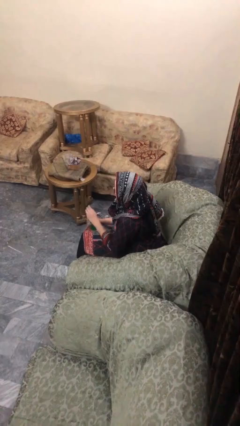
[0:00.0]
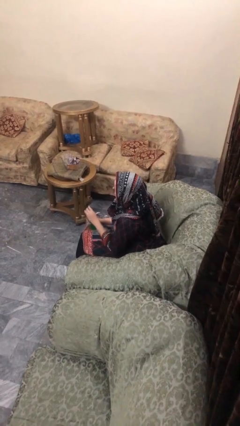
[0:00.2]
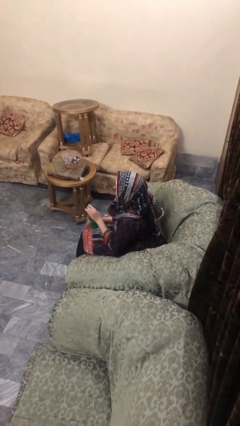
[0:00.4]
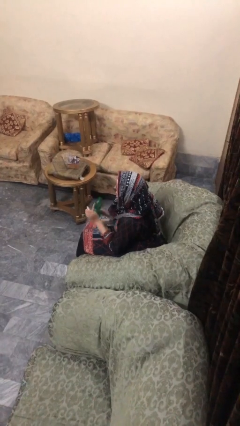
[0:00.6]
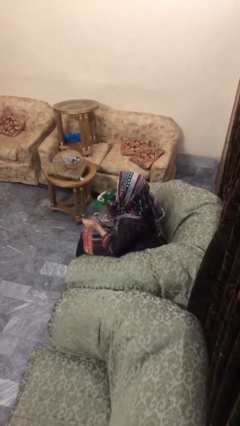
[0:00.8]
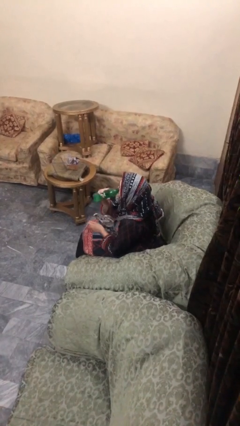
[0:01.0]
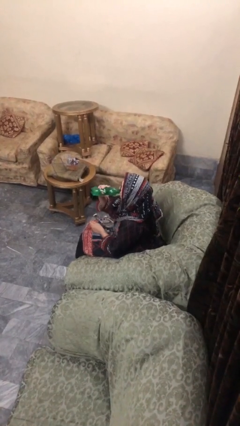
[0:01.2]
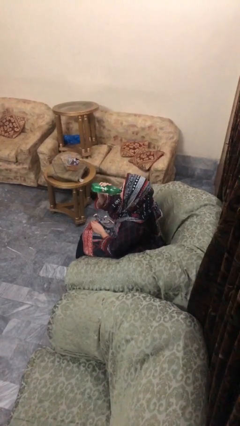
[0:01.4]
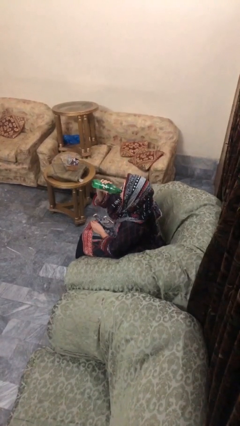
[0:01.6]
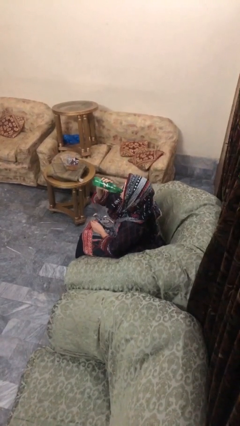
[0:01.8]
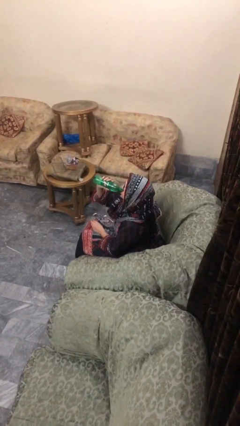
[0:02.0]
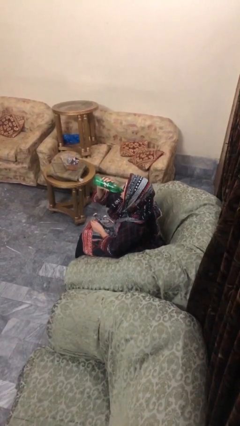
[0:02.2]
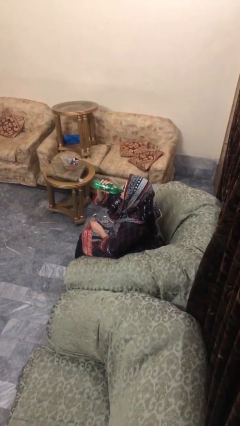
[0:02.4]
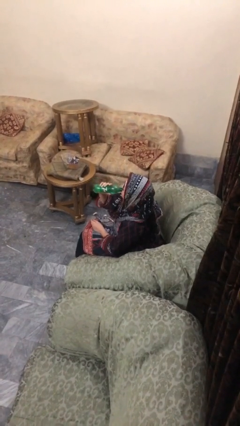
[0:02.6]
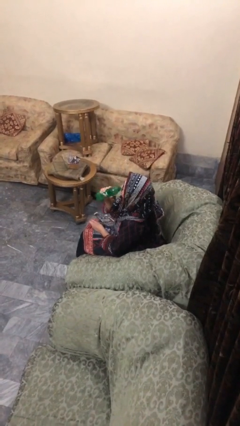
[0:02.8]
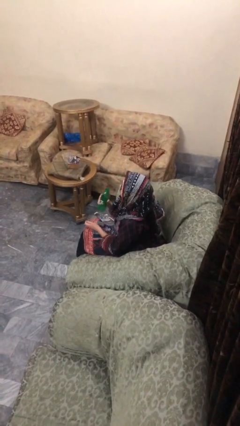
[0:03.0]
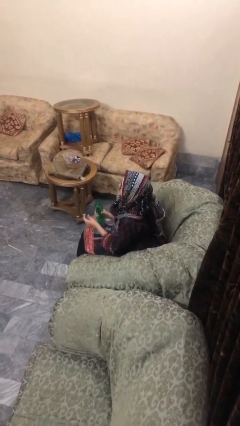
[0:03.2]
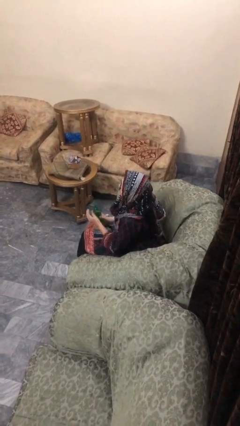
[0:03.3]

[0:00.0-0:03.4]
person drinks from bottle

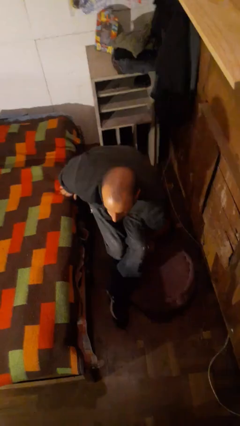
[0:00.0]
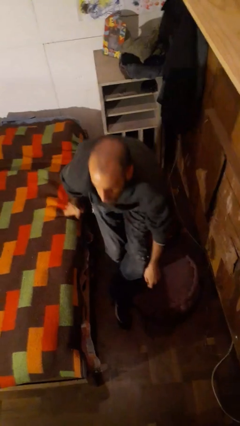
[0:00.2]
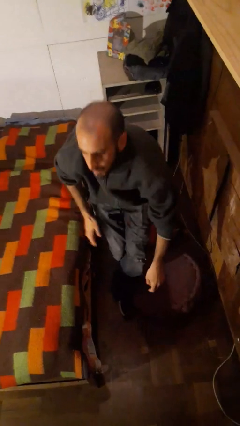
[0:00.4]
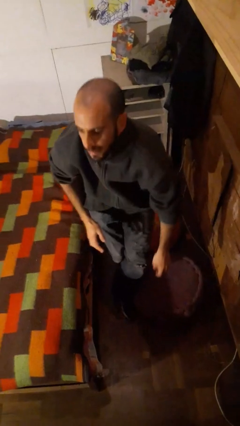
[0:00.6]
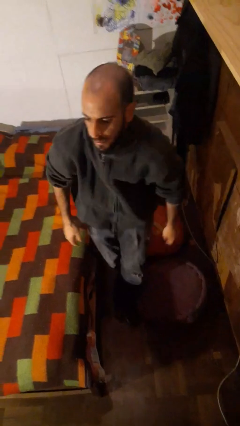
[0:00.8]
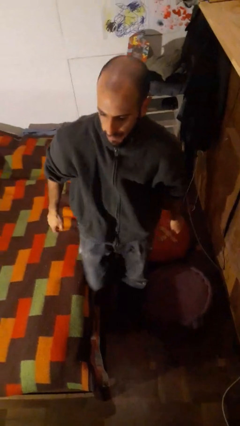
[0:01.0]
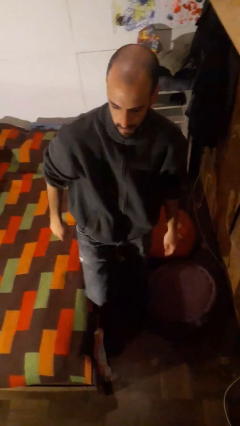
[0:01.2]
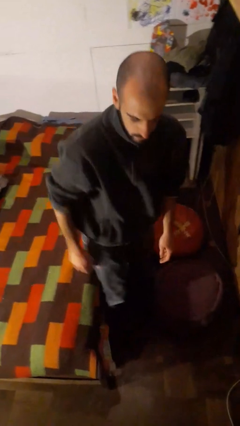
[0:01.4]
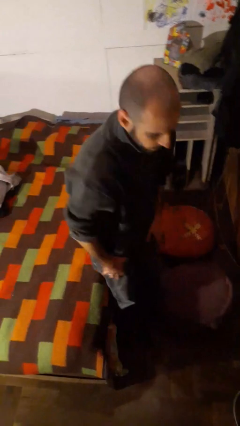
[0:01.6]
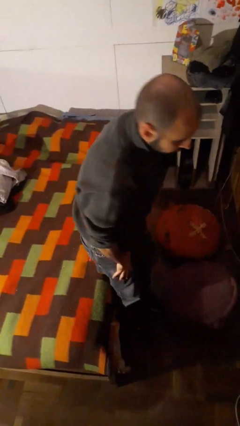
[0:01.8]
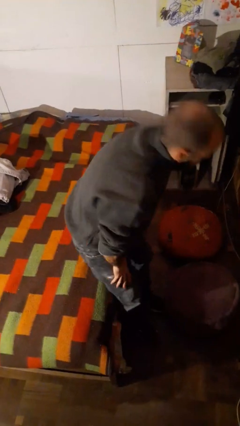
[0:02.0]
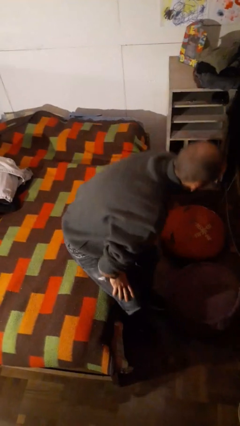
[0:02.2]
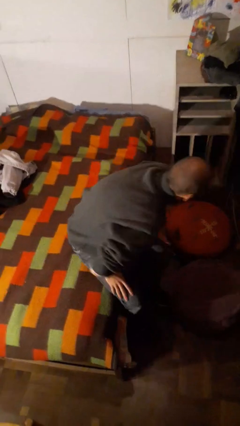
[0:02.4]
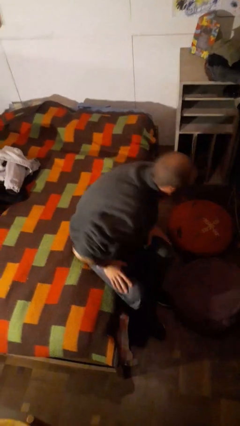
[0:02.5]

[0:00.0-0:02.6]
person stands up from floor

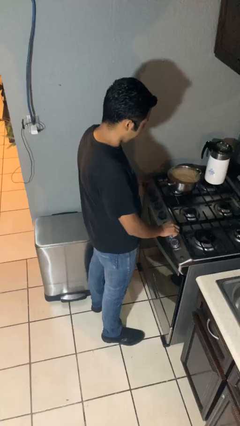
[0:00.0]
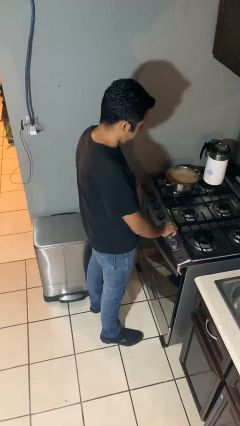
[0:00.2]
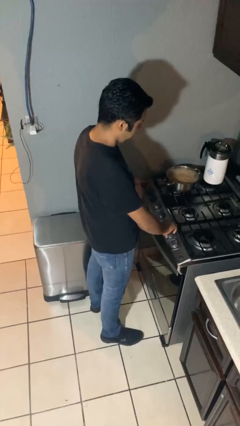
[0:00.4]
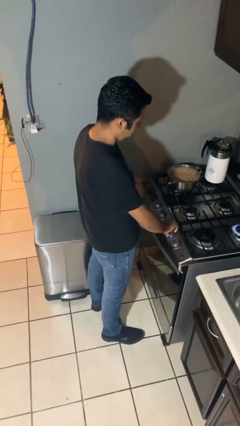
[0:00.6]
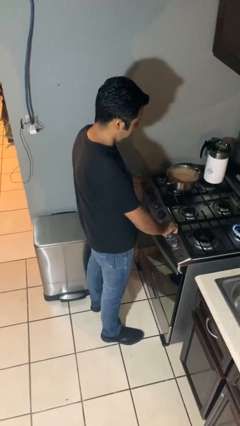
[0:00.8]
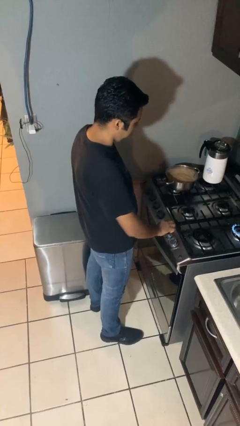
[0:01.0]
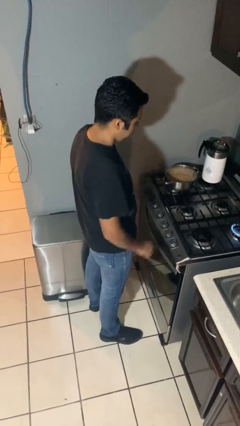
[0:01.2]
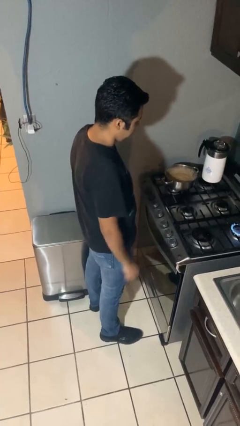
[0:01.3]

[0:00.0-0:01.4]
person turns on stovetop

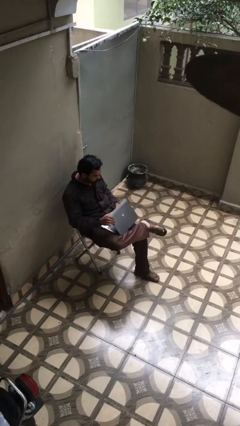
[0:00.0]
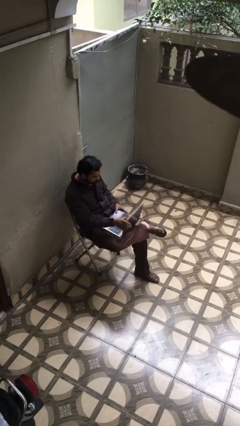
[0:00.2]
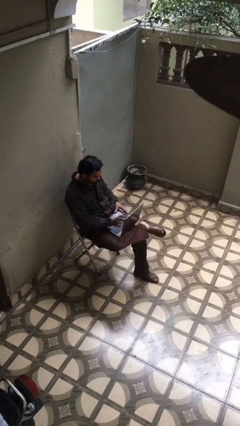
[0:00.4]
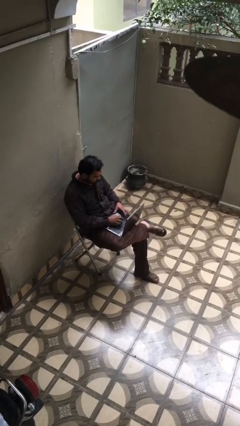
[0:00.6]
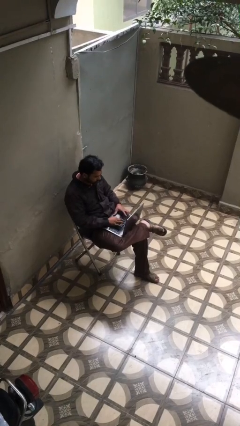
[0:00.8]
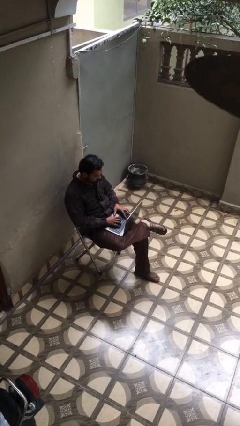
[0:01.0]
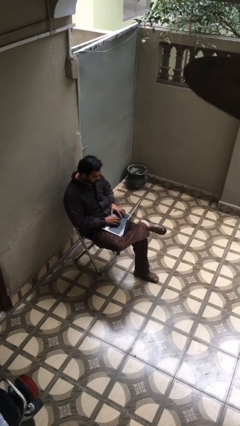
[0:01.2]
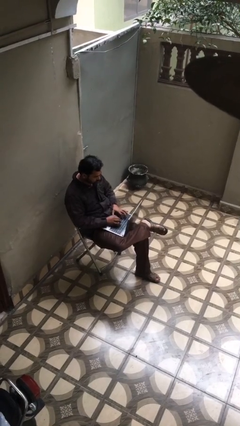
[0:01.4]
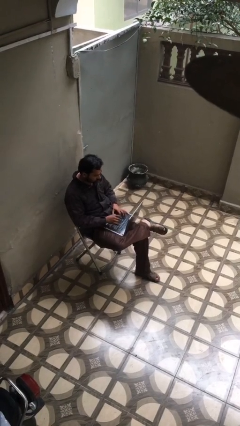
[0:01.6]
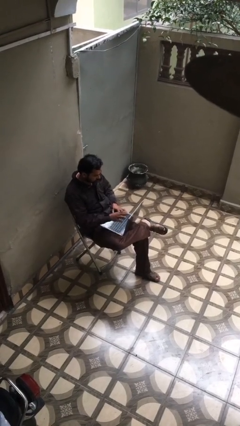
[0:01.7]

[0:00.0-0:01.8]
person interacts with laptop

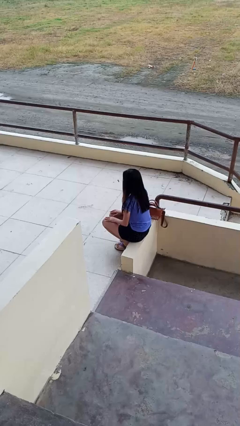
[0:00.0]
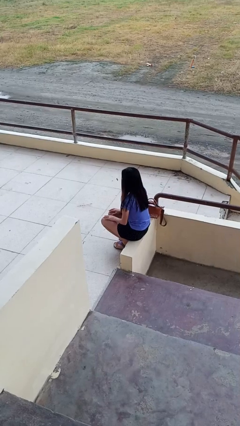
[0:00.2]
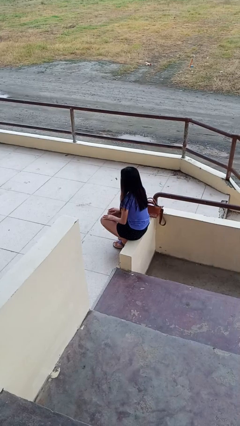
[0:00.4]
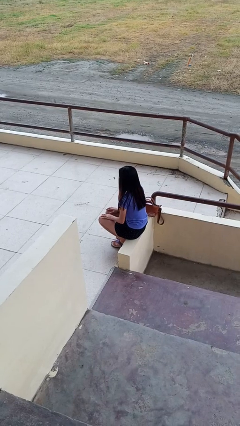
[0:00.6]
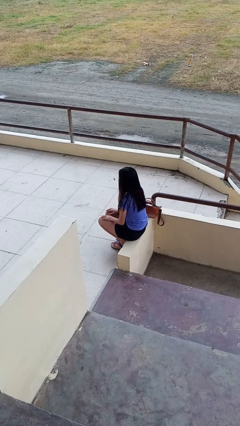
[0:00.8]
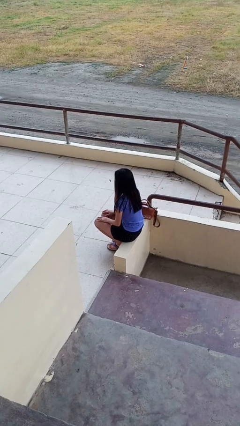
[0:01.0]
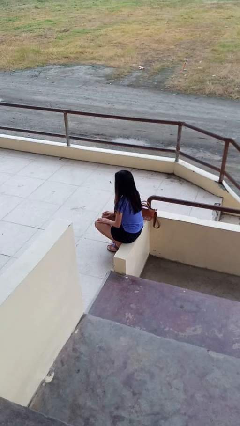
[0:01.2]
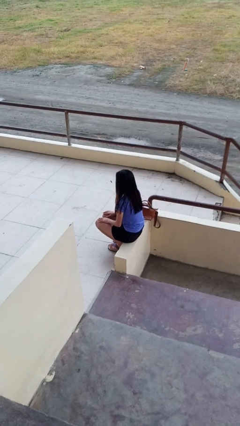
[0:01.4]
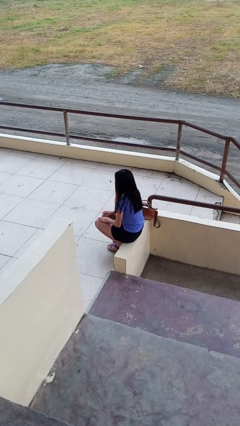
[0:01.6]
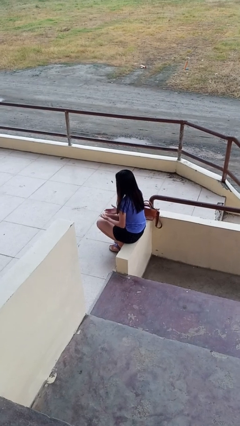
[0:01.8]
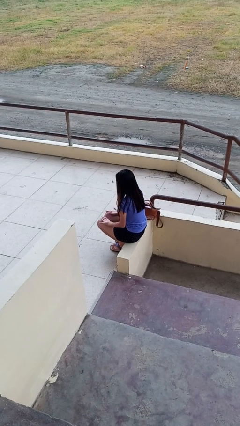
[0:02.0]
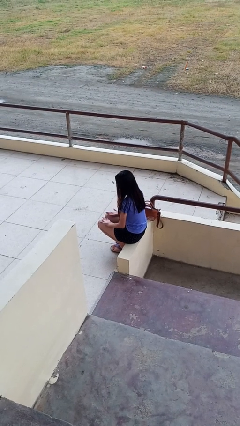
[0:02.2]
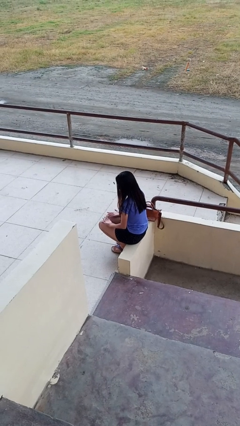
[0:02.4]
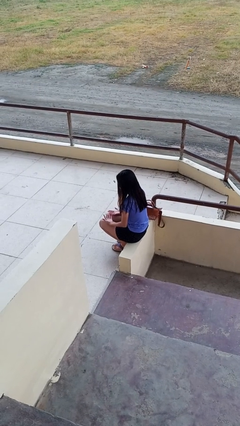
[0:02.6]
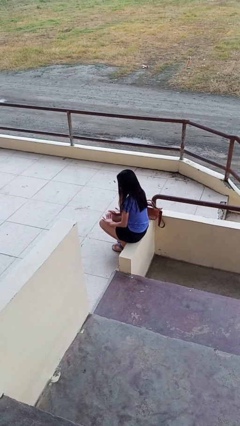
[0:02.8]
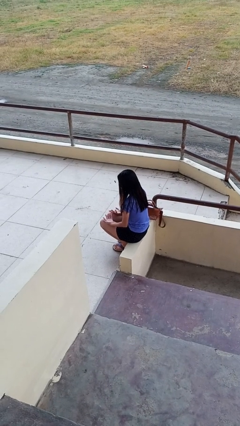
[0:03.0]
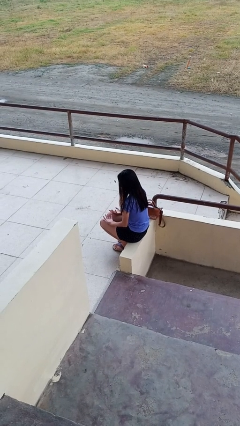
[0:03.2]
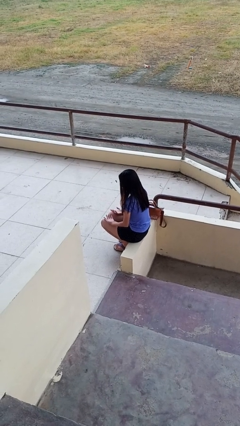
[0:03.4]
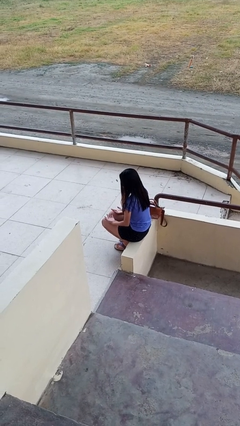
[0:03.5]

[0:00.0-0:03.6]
person looks at hands in lap

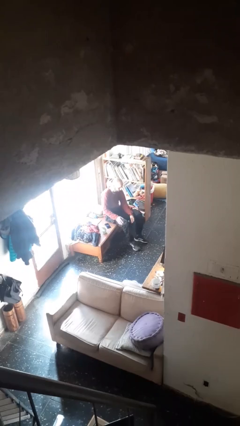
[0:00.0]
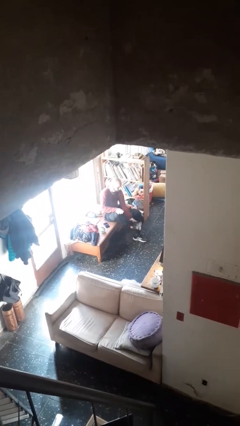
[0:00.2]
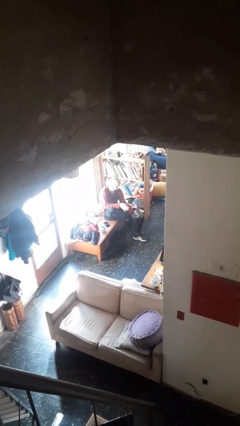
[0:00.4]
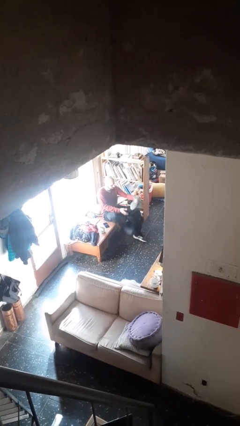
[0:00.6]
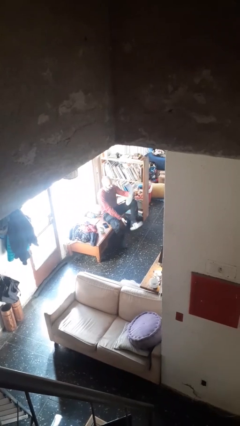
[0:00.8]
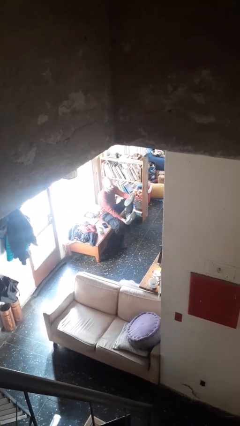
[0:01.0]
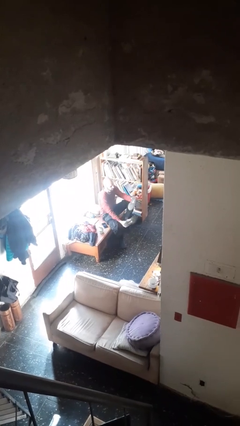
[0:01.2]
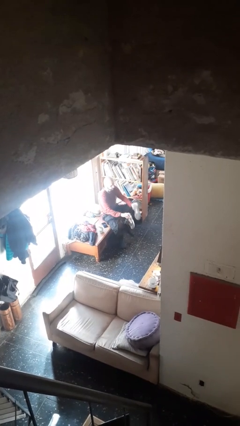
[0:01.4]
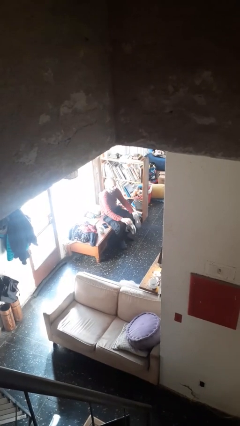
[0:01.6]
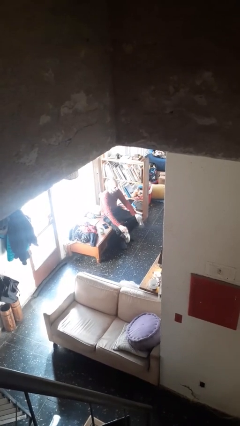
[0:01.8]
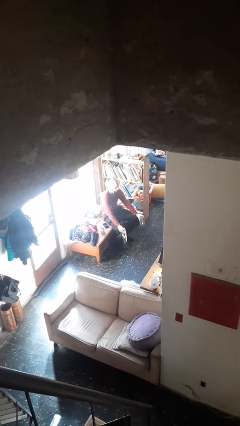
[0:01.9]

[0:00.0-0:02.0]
person takes off shoes

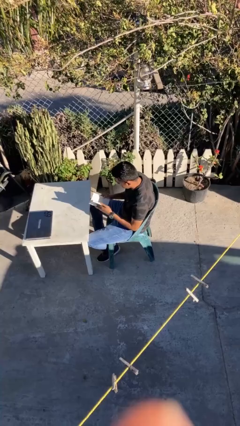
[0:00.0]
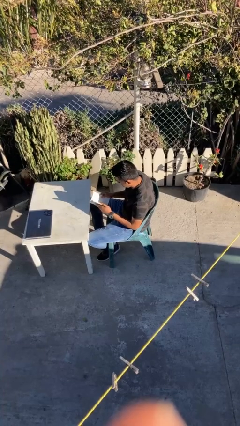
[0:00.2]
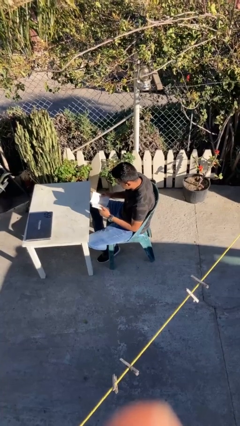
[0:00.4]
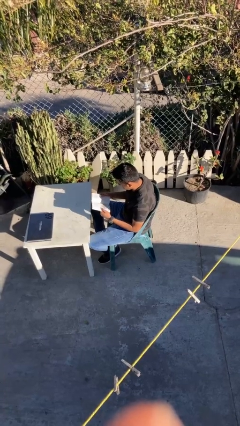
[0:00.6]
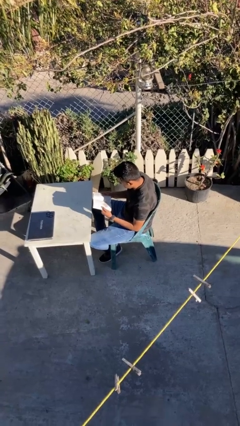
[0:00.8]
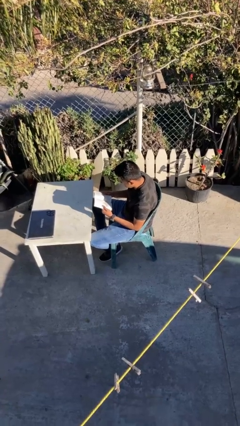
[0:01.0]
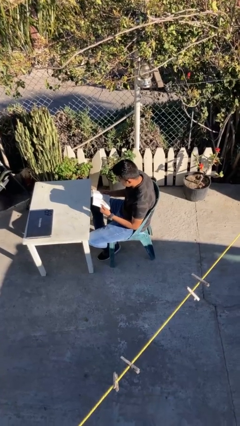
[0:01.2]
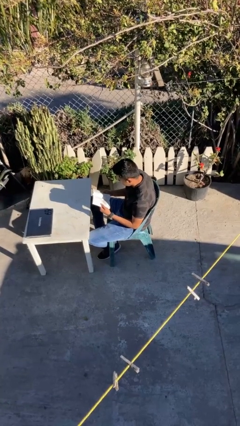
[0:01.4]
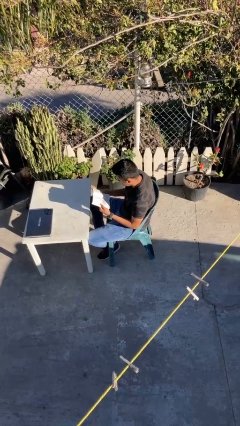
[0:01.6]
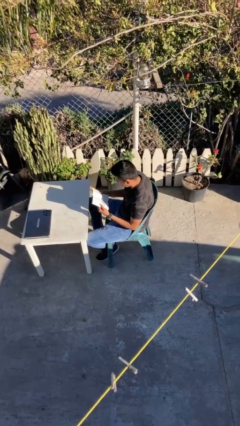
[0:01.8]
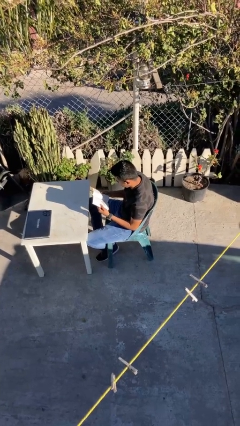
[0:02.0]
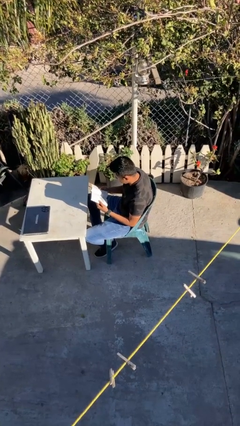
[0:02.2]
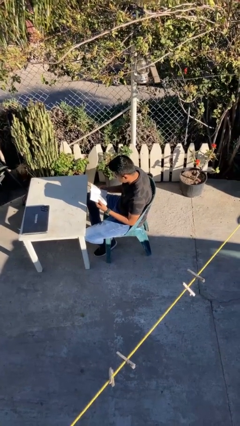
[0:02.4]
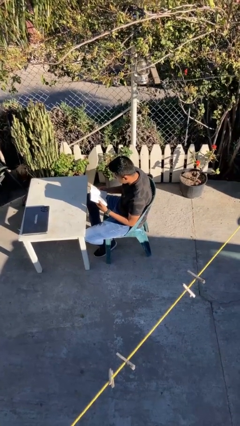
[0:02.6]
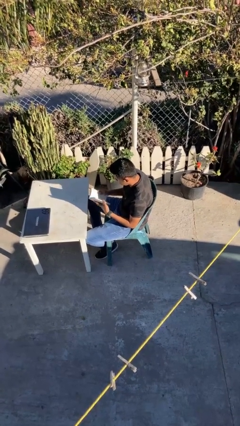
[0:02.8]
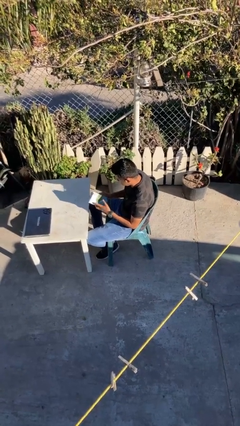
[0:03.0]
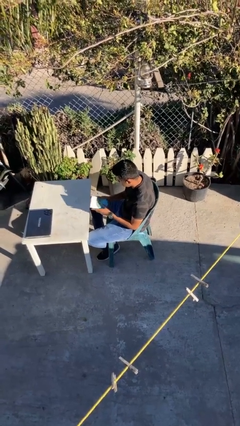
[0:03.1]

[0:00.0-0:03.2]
person reads document
